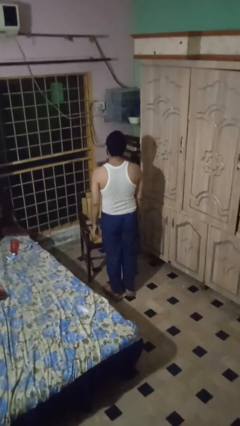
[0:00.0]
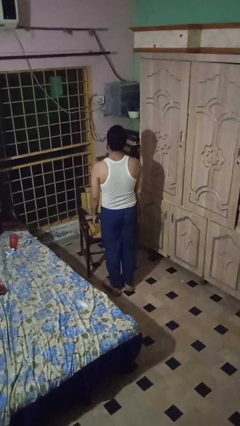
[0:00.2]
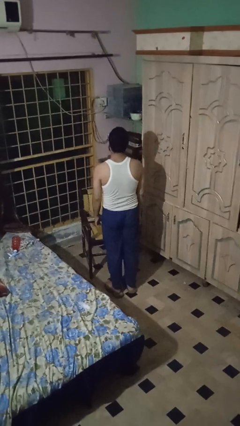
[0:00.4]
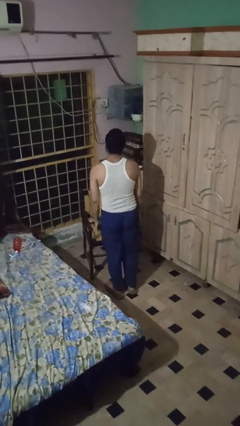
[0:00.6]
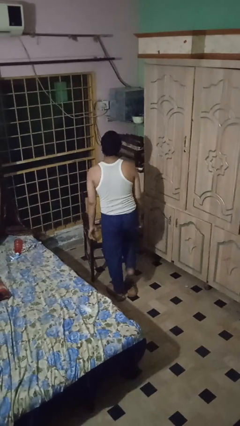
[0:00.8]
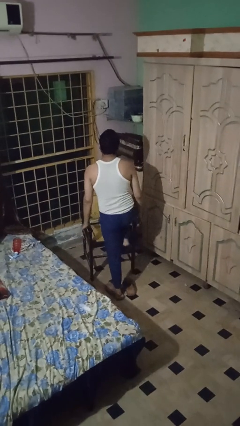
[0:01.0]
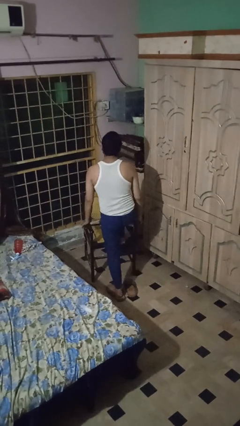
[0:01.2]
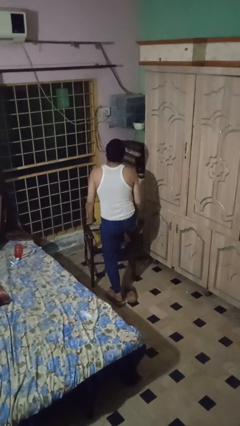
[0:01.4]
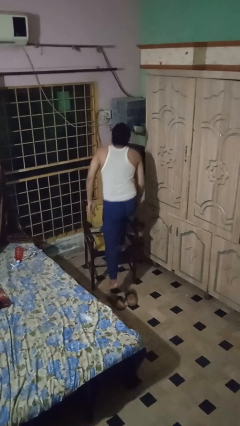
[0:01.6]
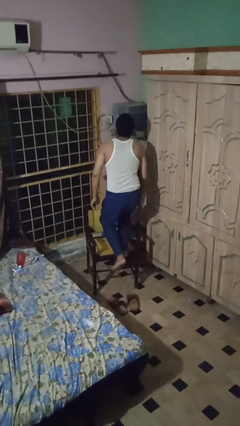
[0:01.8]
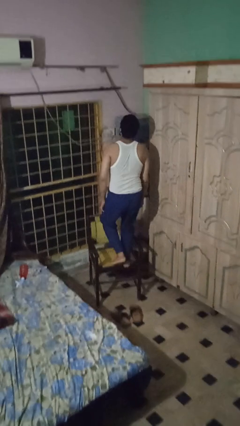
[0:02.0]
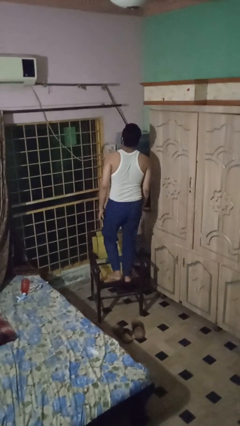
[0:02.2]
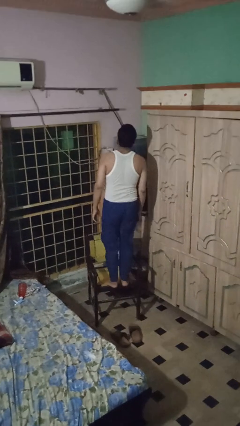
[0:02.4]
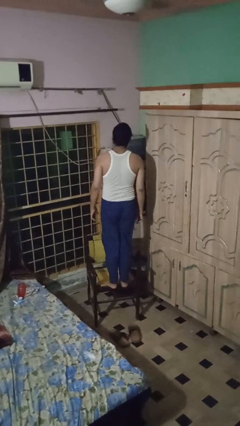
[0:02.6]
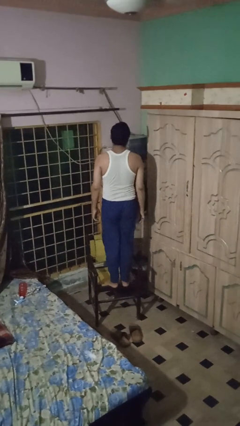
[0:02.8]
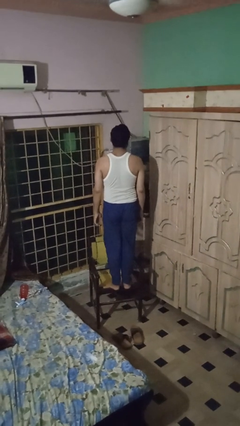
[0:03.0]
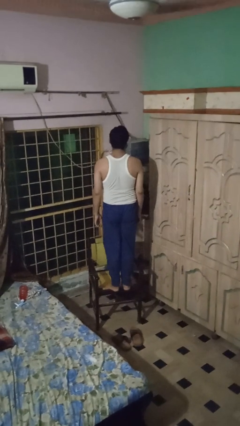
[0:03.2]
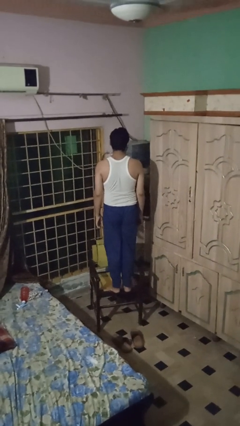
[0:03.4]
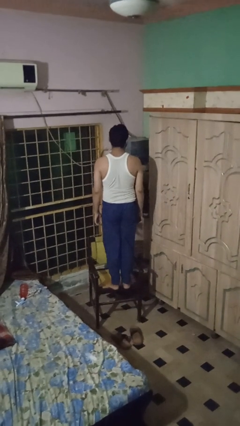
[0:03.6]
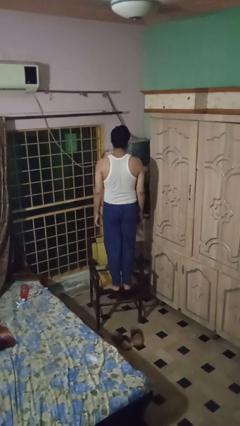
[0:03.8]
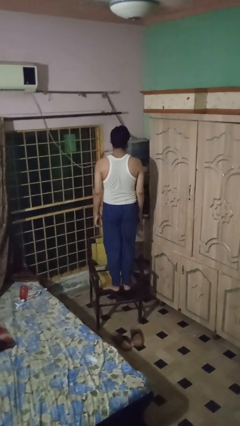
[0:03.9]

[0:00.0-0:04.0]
person climbs on chair

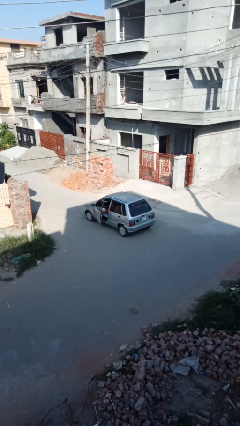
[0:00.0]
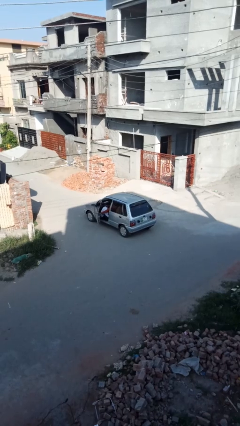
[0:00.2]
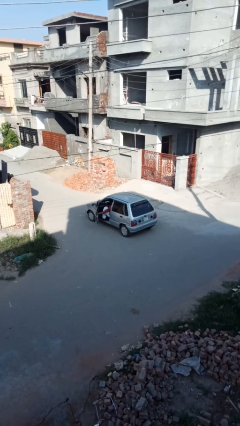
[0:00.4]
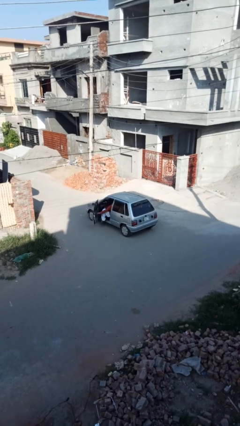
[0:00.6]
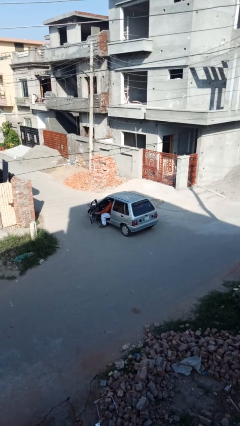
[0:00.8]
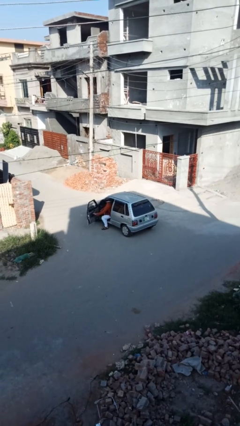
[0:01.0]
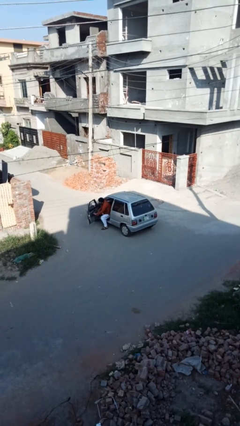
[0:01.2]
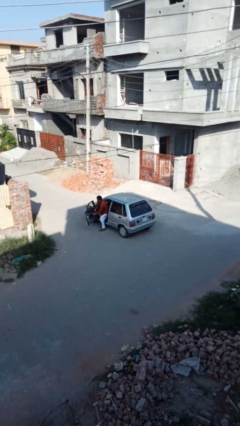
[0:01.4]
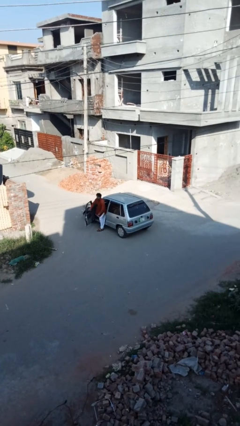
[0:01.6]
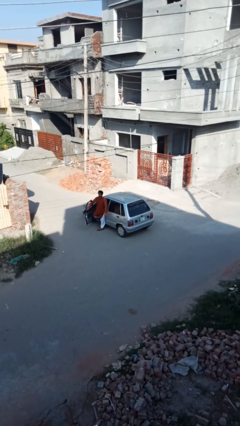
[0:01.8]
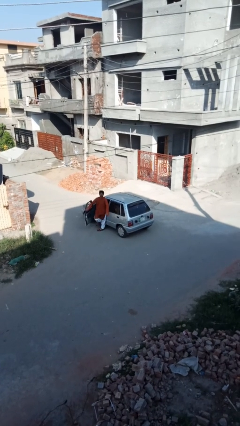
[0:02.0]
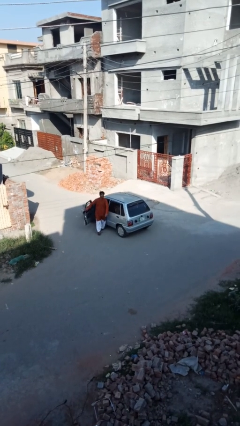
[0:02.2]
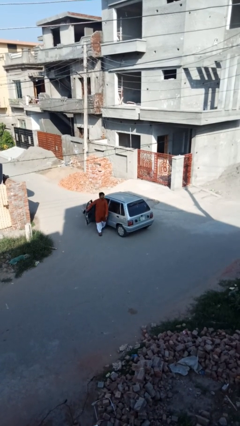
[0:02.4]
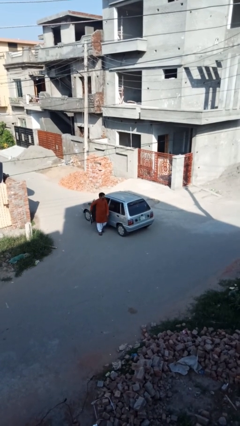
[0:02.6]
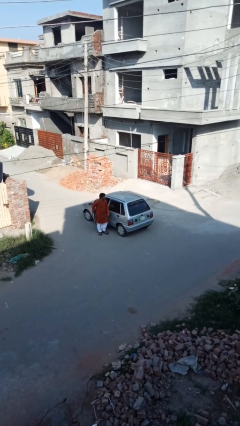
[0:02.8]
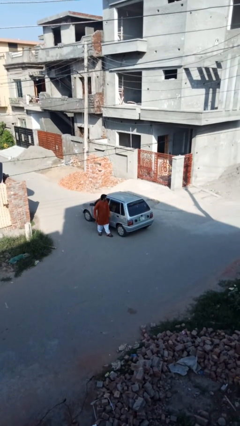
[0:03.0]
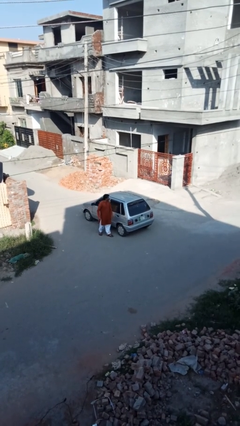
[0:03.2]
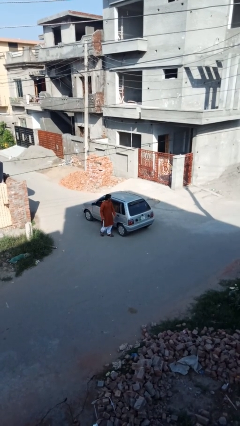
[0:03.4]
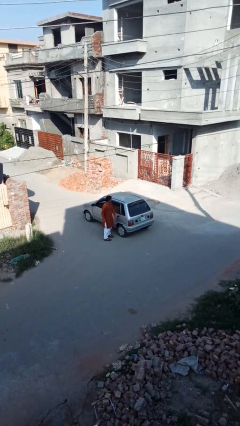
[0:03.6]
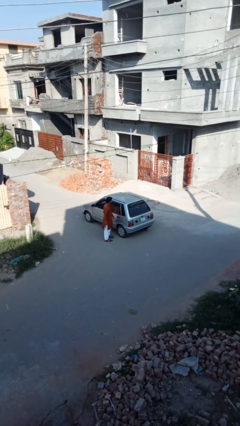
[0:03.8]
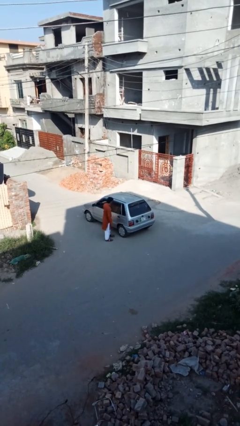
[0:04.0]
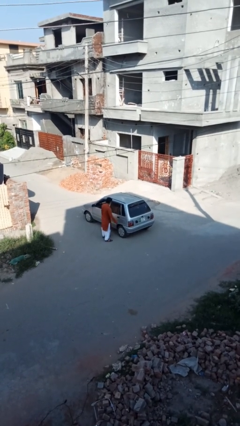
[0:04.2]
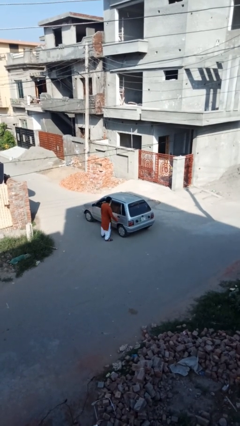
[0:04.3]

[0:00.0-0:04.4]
car drops off person

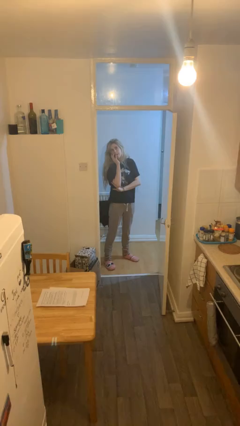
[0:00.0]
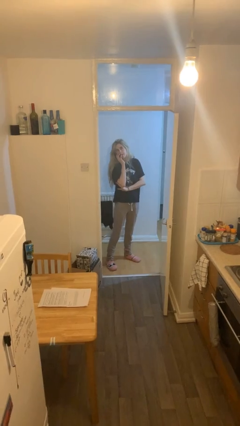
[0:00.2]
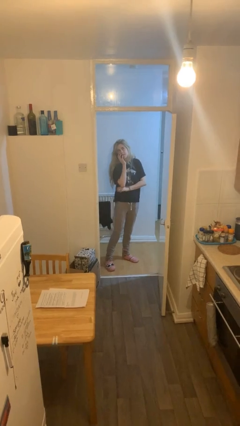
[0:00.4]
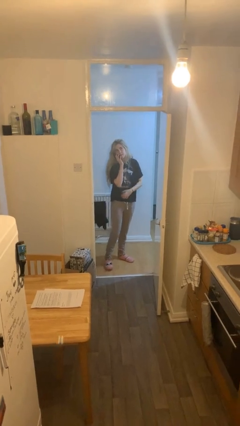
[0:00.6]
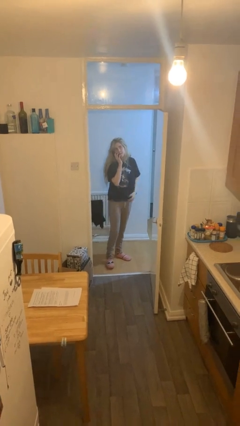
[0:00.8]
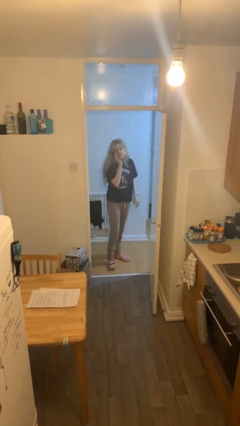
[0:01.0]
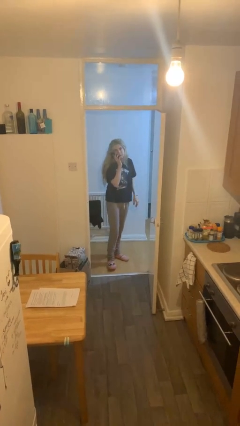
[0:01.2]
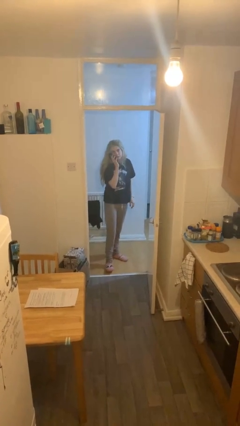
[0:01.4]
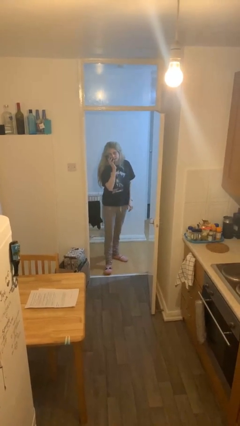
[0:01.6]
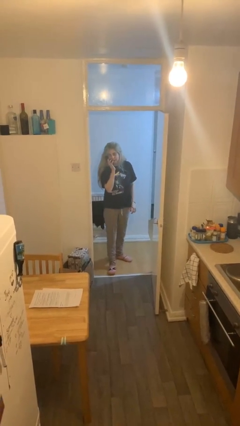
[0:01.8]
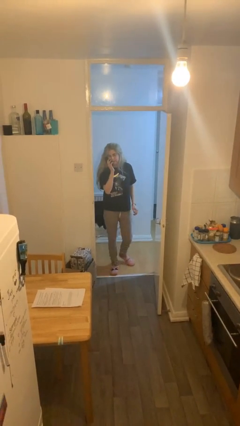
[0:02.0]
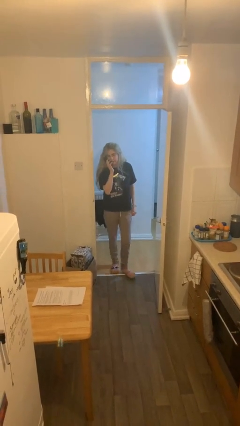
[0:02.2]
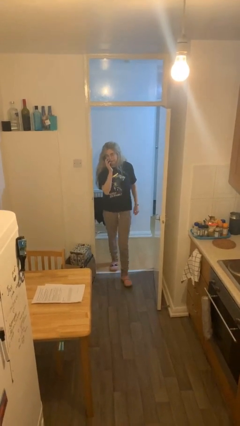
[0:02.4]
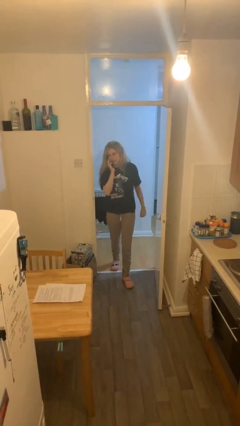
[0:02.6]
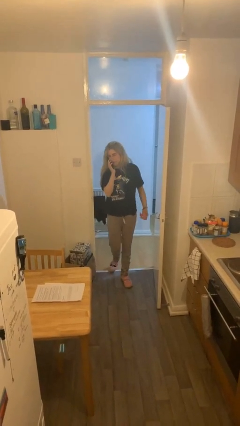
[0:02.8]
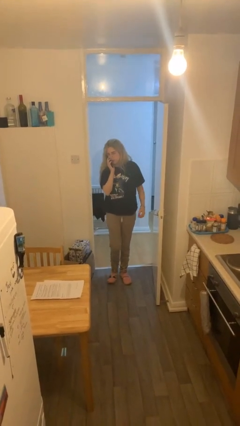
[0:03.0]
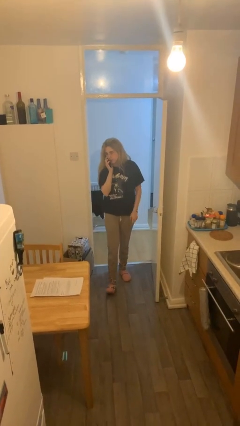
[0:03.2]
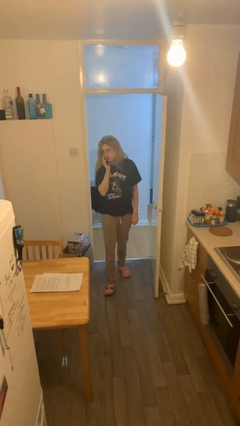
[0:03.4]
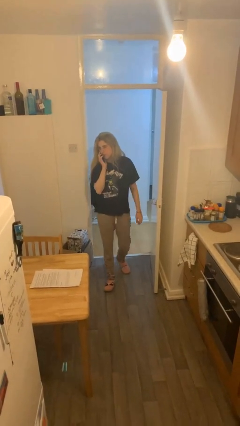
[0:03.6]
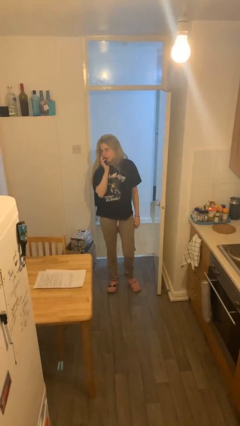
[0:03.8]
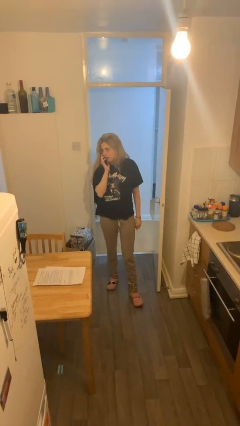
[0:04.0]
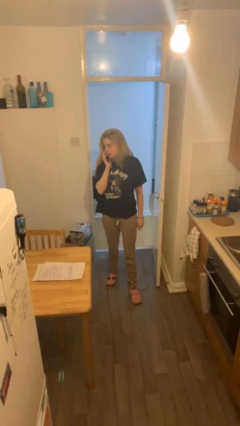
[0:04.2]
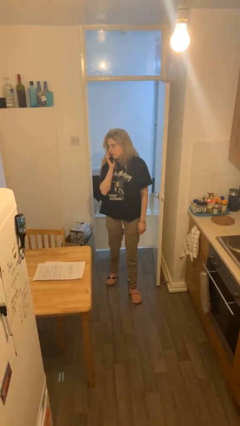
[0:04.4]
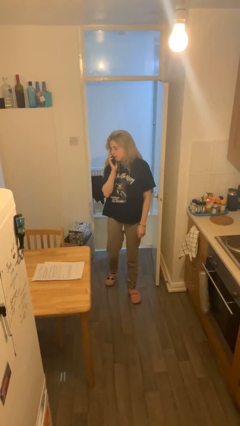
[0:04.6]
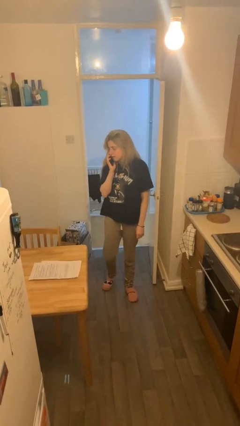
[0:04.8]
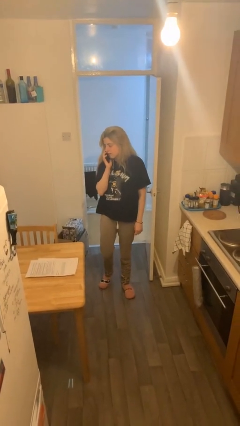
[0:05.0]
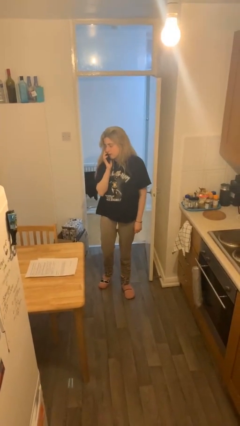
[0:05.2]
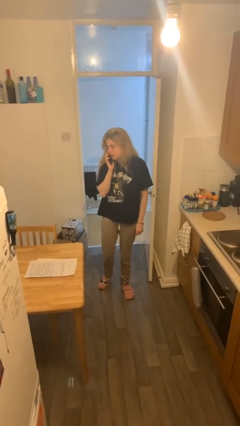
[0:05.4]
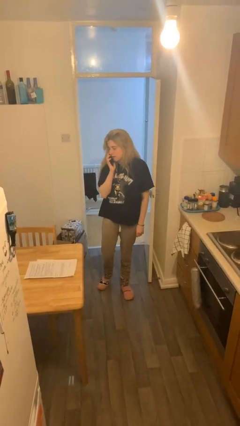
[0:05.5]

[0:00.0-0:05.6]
person enters scene through structure

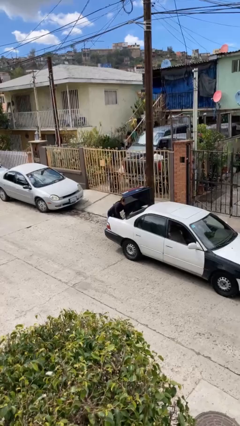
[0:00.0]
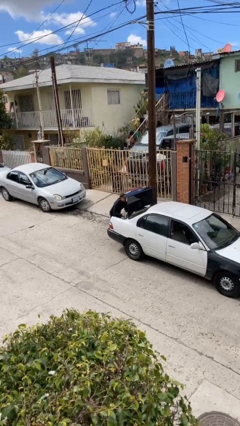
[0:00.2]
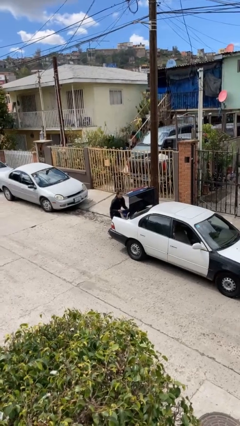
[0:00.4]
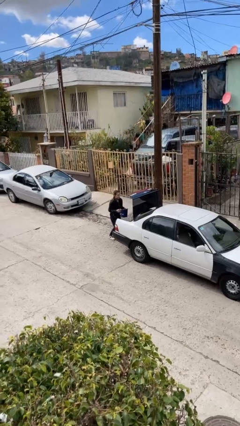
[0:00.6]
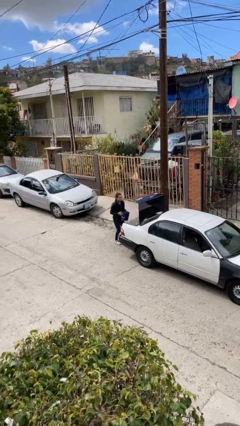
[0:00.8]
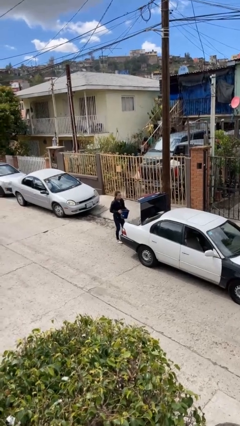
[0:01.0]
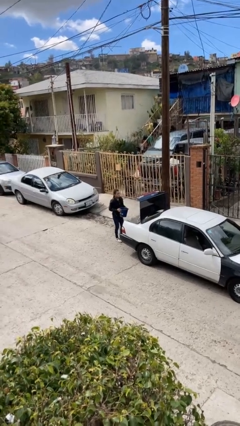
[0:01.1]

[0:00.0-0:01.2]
person unloads car

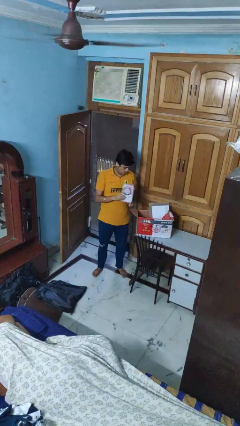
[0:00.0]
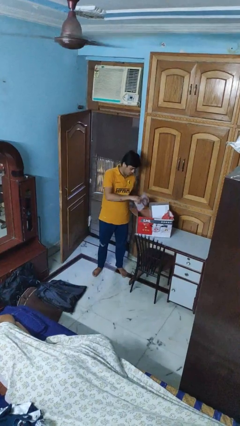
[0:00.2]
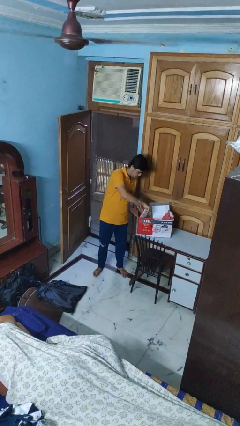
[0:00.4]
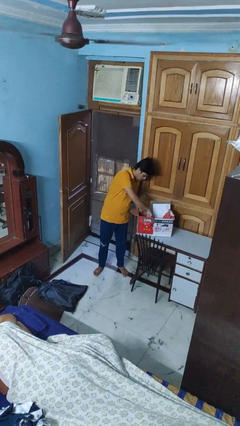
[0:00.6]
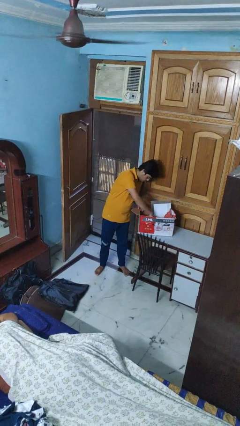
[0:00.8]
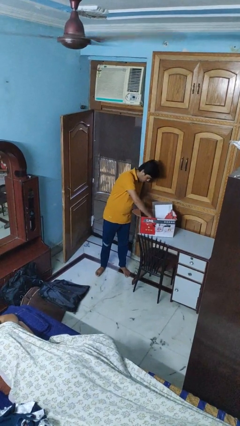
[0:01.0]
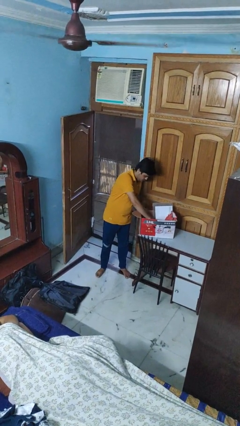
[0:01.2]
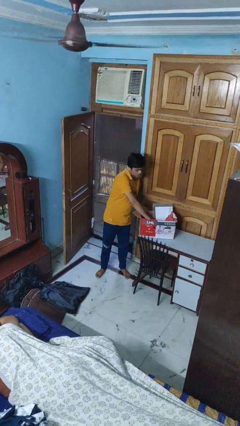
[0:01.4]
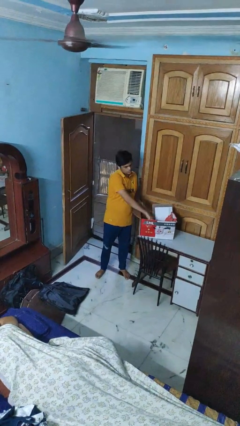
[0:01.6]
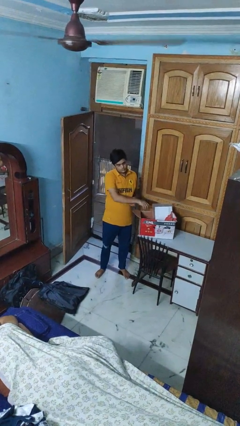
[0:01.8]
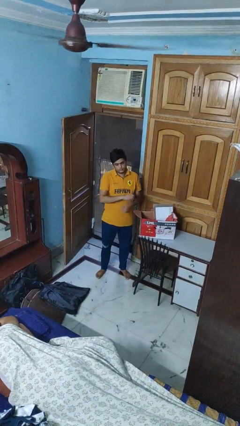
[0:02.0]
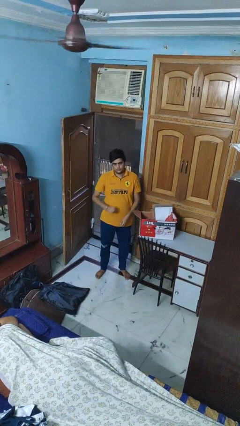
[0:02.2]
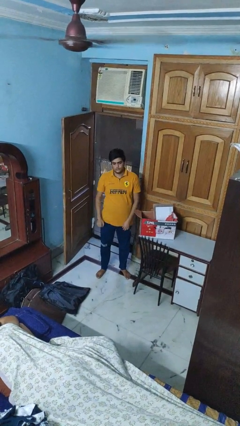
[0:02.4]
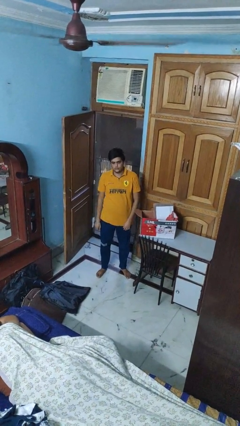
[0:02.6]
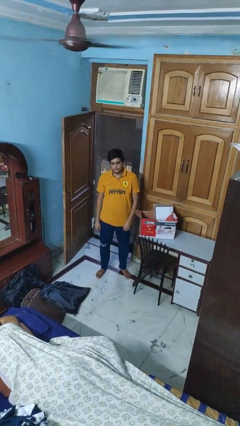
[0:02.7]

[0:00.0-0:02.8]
person puts object into box
